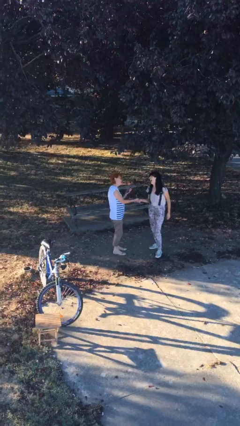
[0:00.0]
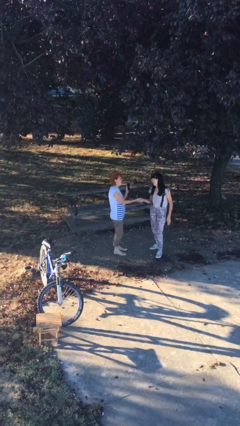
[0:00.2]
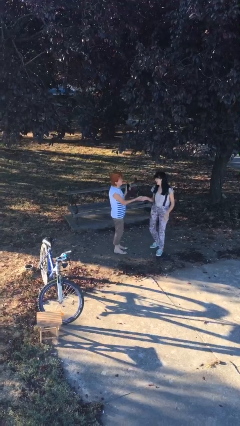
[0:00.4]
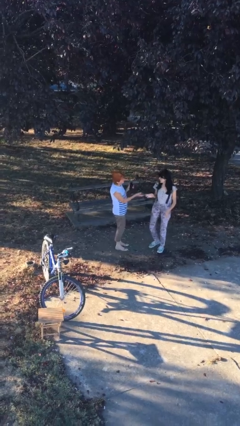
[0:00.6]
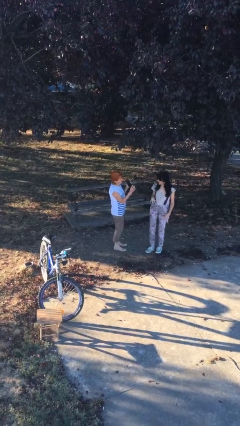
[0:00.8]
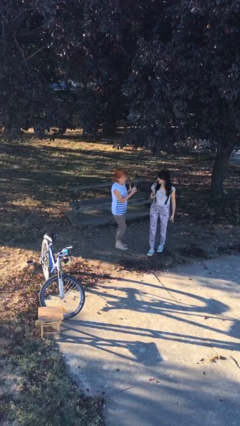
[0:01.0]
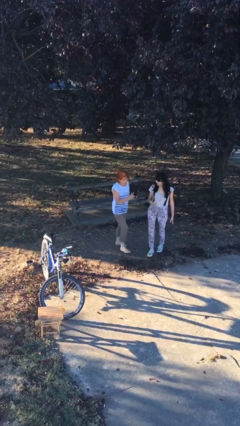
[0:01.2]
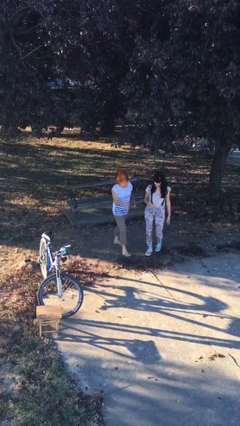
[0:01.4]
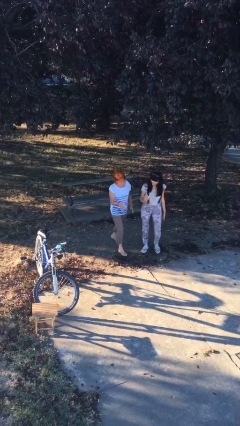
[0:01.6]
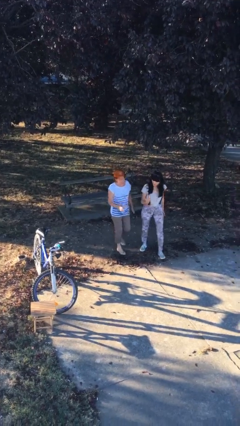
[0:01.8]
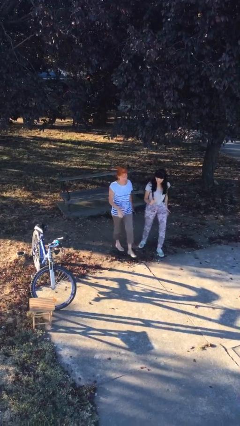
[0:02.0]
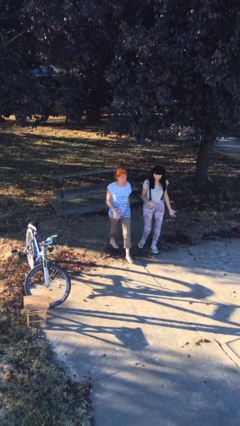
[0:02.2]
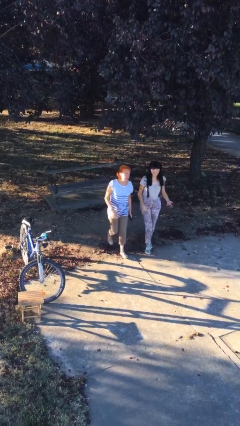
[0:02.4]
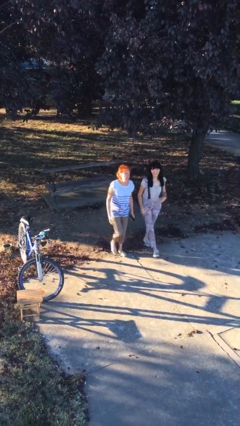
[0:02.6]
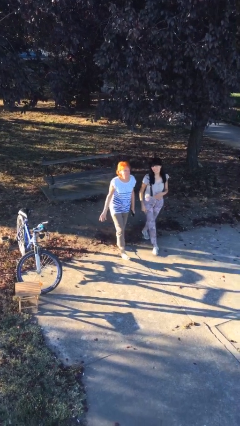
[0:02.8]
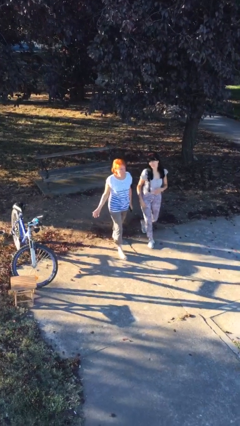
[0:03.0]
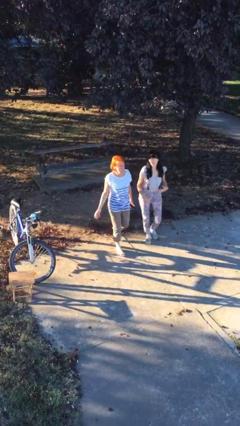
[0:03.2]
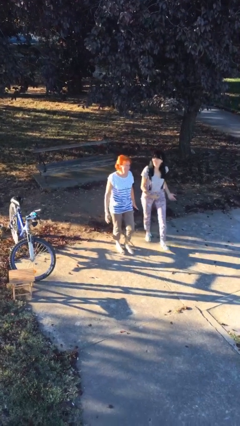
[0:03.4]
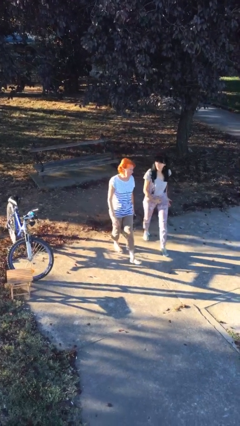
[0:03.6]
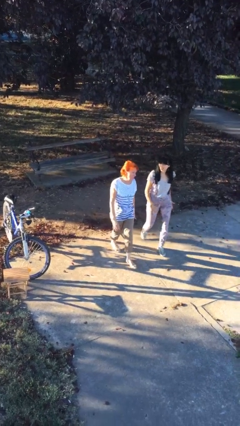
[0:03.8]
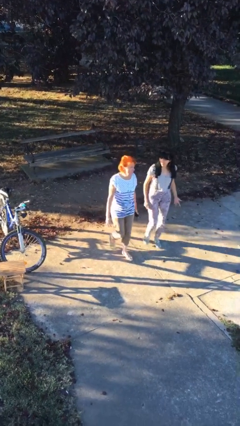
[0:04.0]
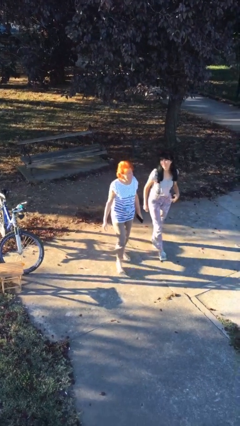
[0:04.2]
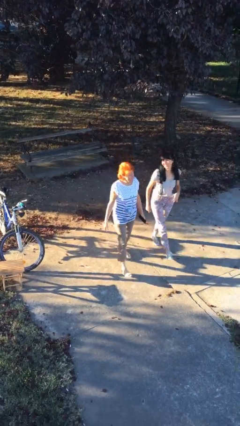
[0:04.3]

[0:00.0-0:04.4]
person talks to person

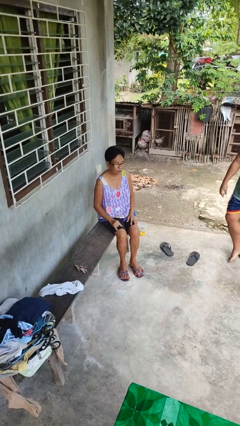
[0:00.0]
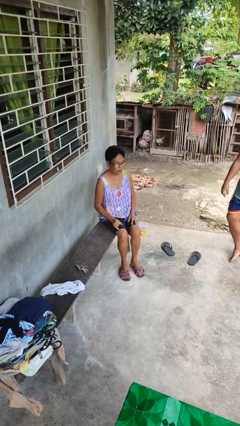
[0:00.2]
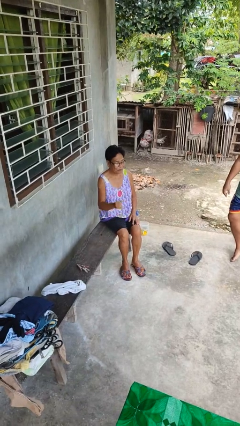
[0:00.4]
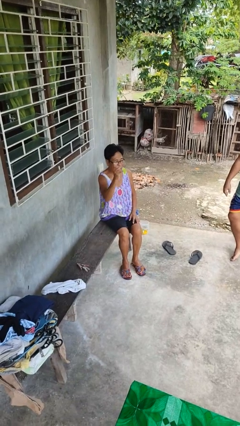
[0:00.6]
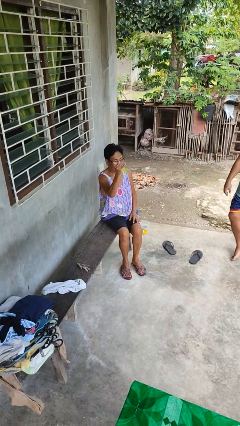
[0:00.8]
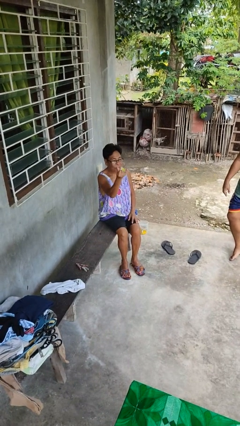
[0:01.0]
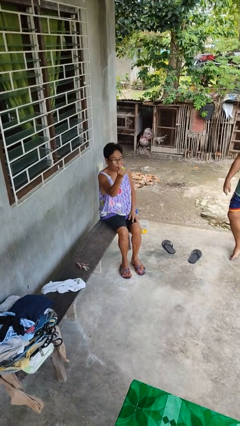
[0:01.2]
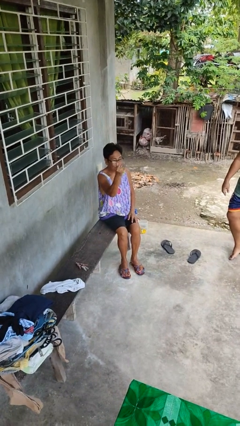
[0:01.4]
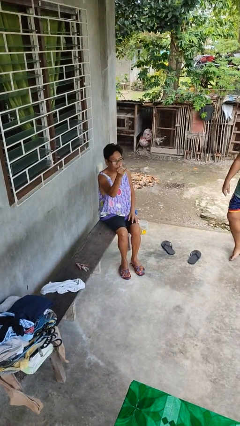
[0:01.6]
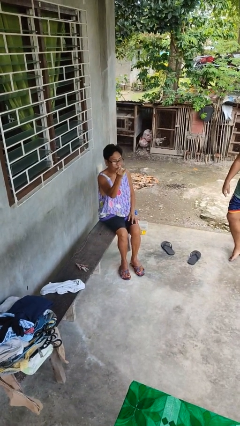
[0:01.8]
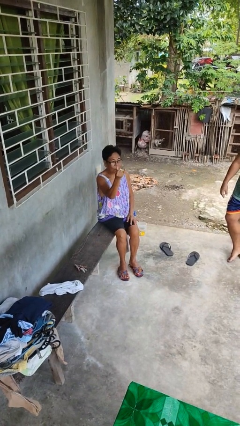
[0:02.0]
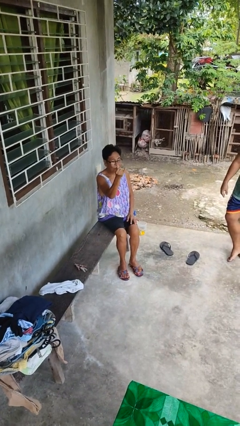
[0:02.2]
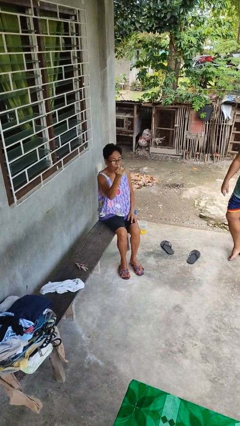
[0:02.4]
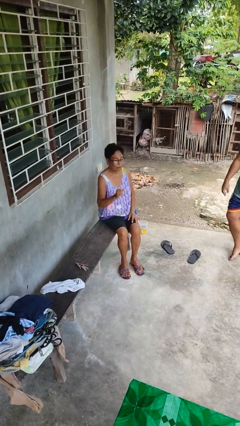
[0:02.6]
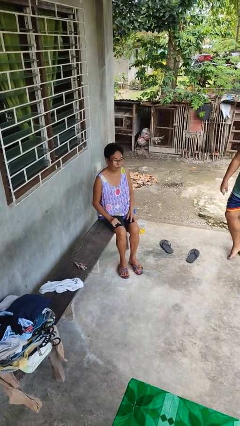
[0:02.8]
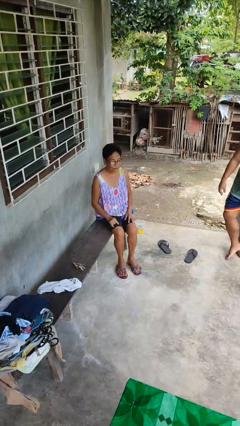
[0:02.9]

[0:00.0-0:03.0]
person gestures hang loose

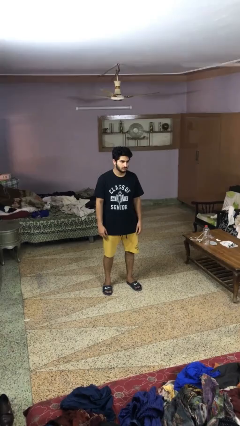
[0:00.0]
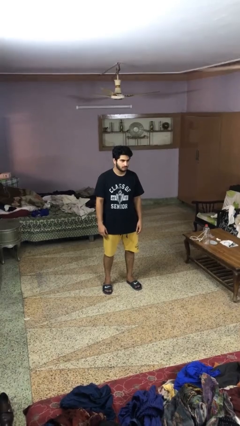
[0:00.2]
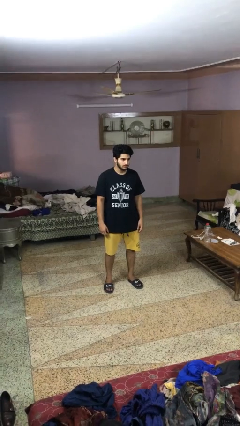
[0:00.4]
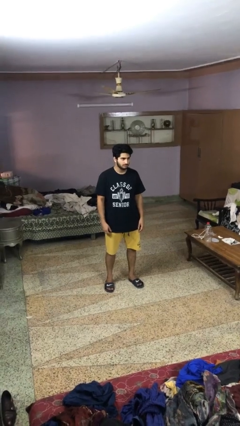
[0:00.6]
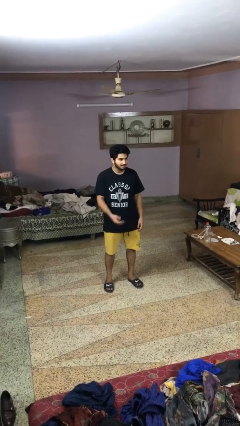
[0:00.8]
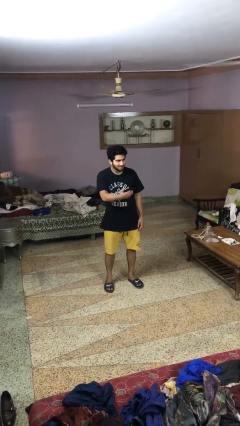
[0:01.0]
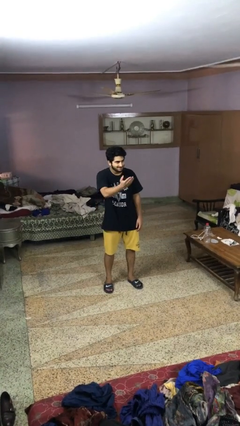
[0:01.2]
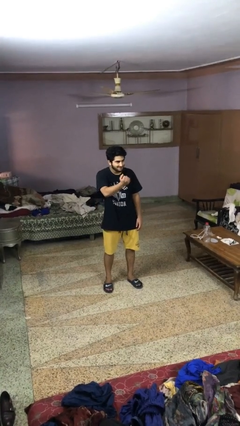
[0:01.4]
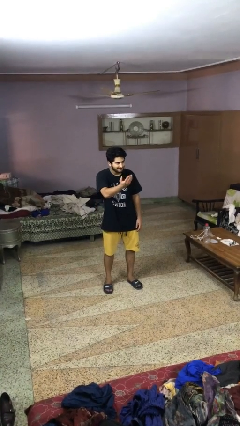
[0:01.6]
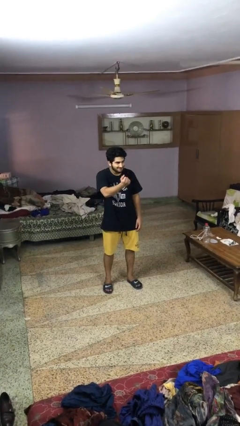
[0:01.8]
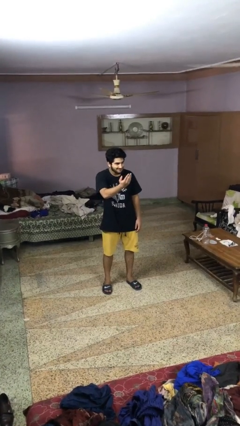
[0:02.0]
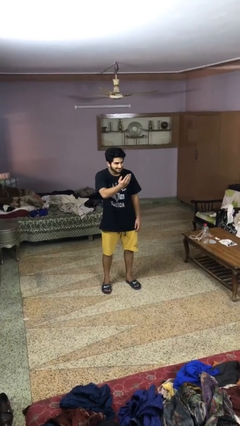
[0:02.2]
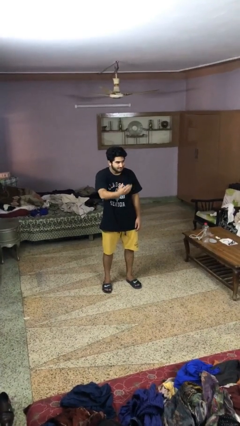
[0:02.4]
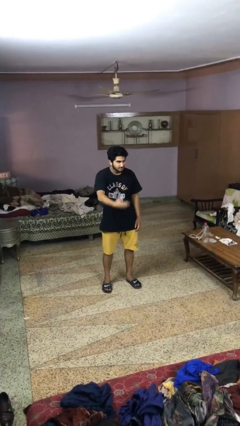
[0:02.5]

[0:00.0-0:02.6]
person gestures come here

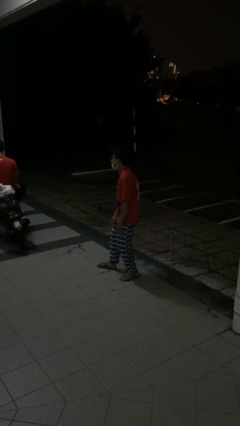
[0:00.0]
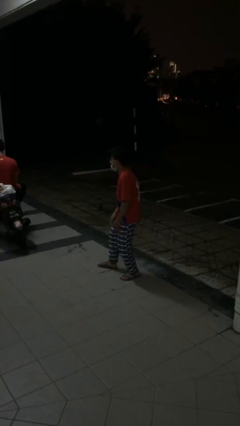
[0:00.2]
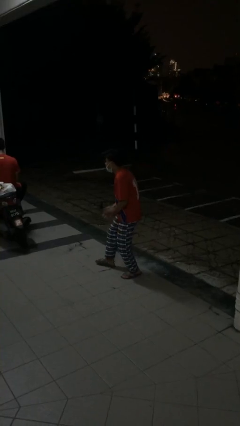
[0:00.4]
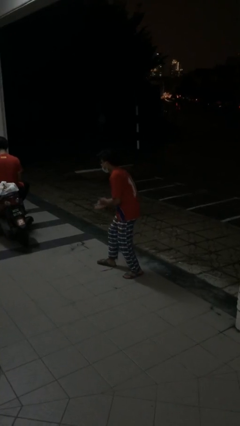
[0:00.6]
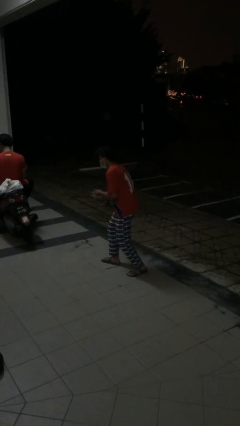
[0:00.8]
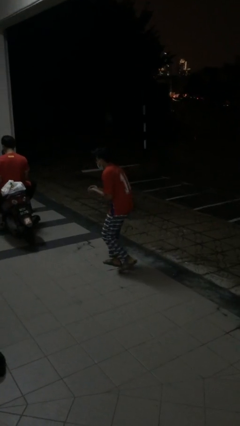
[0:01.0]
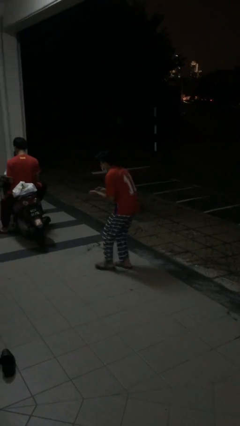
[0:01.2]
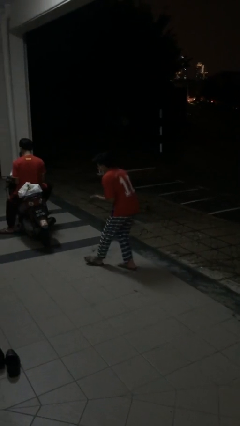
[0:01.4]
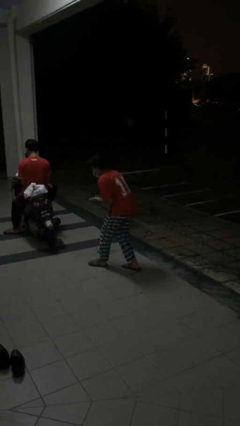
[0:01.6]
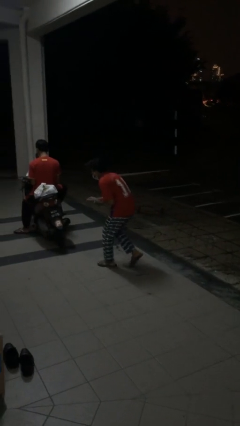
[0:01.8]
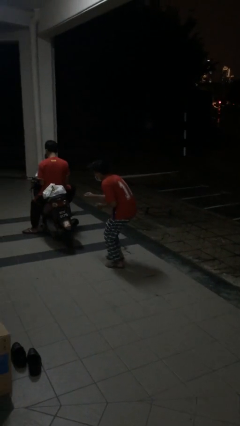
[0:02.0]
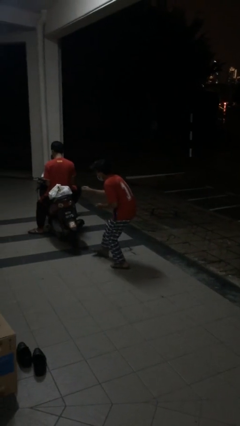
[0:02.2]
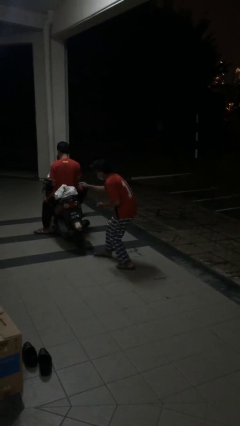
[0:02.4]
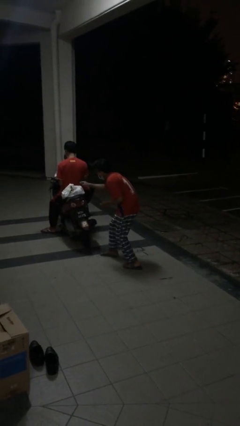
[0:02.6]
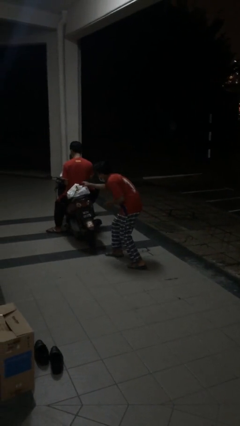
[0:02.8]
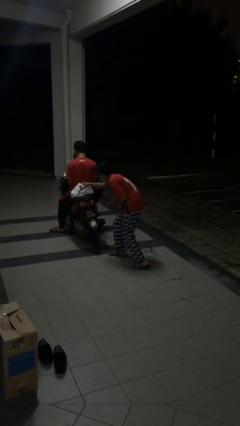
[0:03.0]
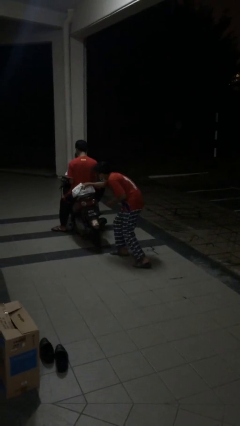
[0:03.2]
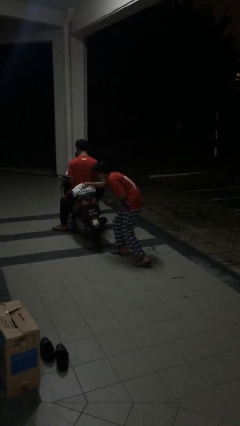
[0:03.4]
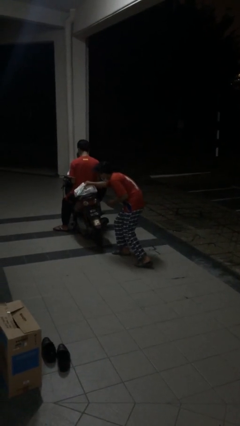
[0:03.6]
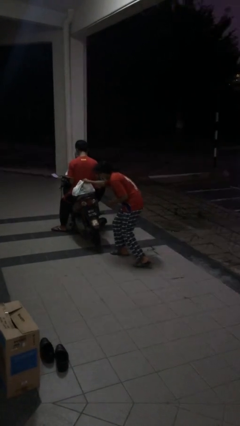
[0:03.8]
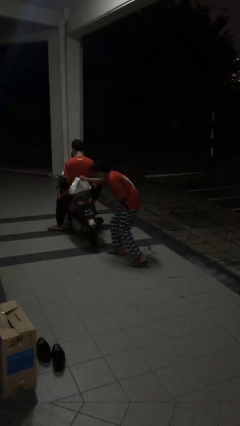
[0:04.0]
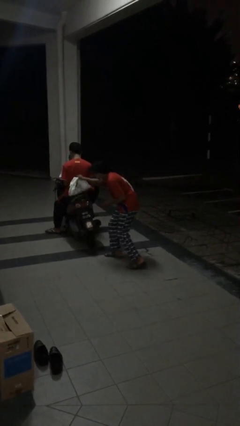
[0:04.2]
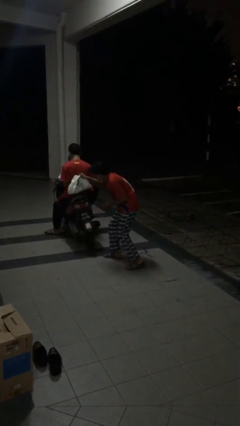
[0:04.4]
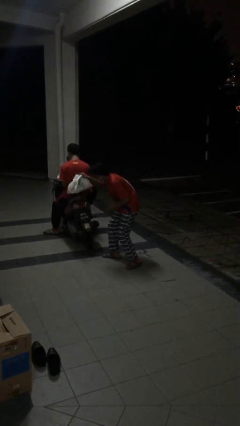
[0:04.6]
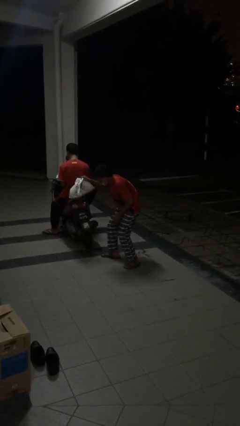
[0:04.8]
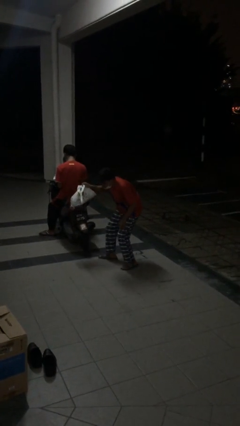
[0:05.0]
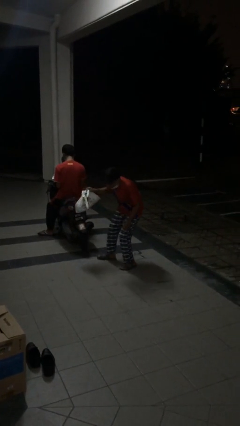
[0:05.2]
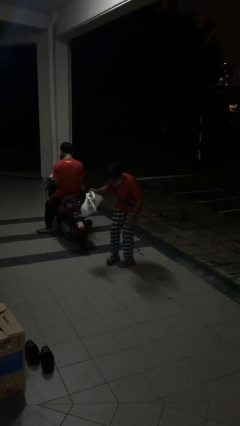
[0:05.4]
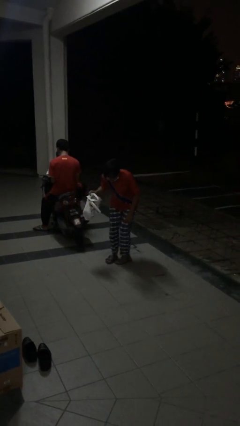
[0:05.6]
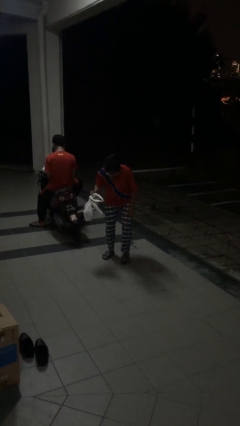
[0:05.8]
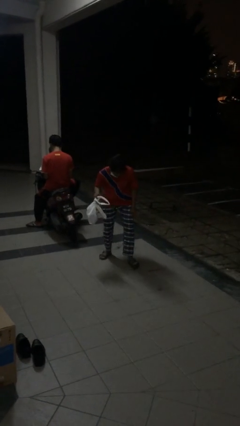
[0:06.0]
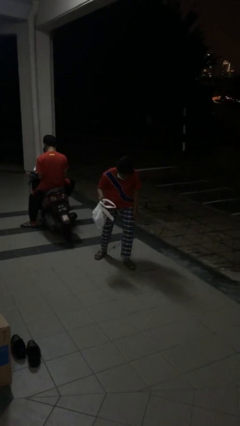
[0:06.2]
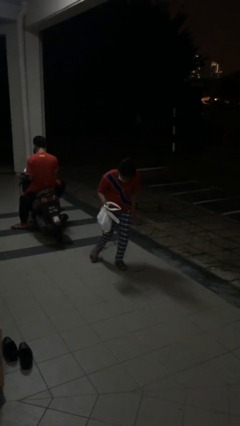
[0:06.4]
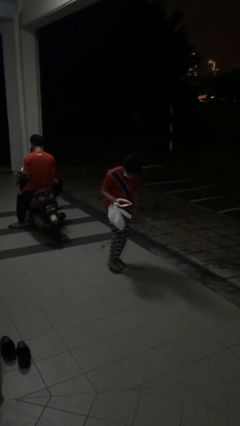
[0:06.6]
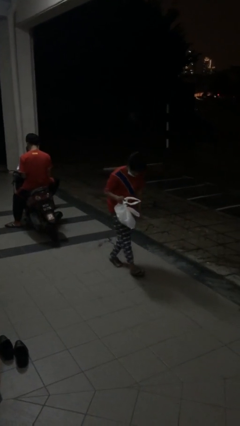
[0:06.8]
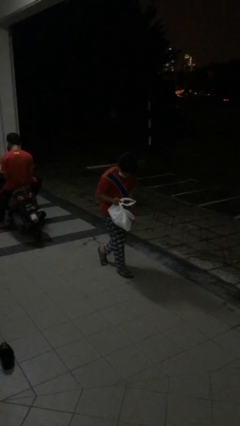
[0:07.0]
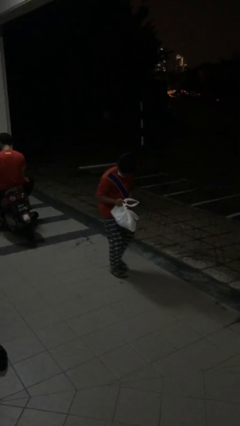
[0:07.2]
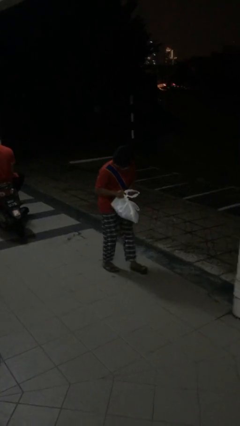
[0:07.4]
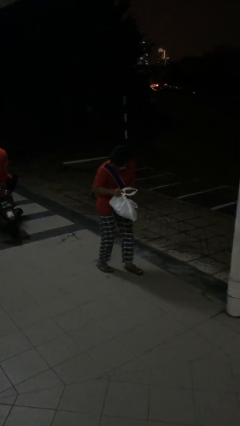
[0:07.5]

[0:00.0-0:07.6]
person steals object from person

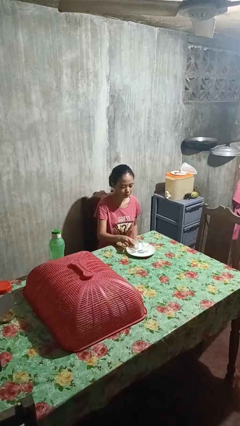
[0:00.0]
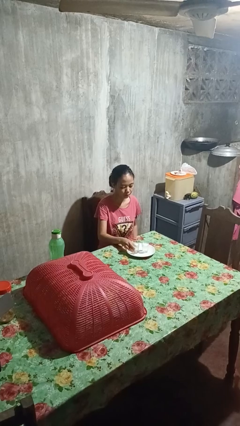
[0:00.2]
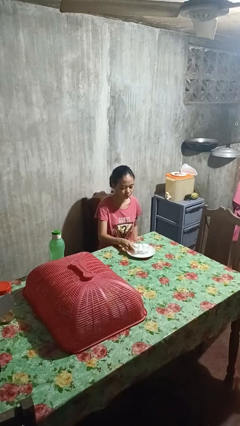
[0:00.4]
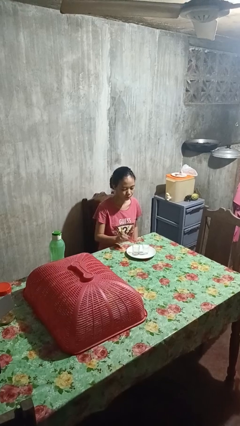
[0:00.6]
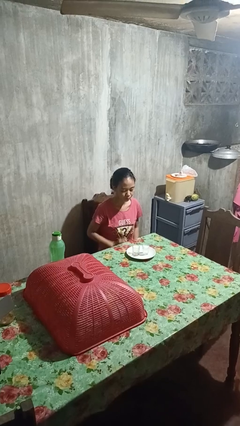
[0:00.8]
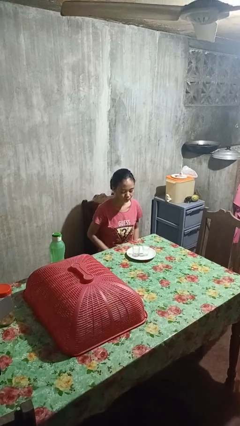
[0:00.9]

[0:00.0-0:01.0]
person puts down object on table
